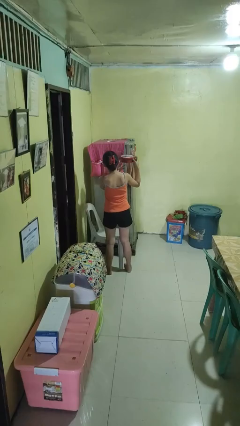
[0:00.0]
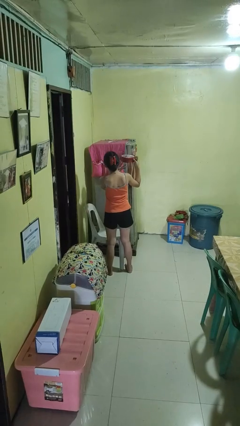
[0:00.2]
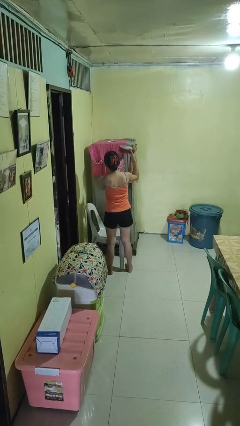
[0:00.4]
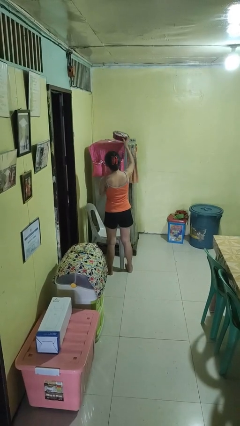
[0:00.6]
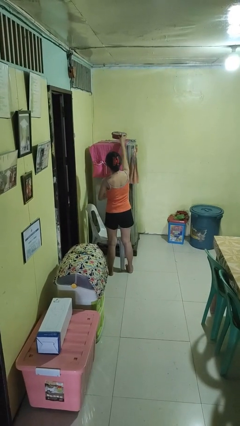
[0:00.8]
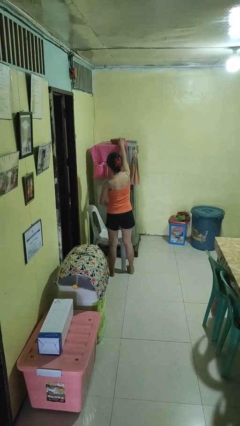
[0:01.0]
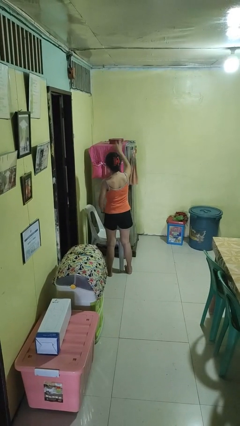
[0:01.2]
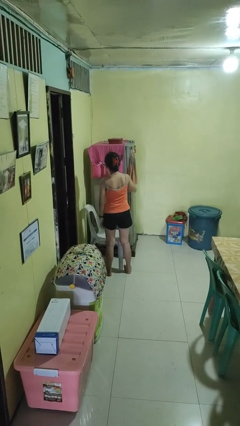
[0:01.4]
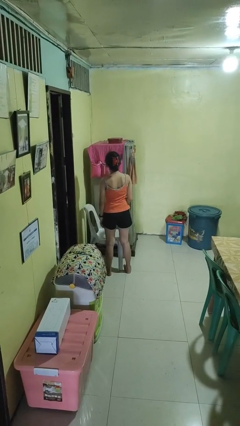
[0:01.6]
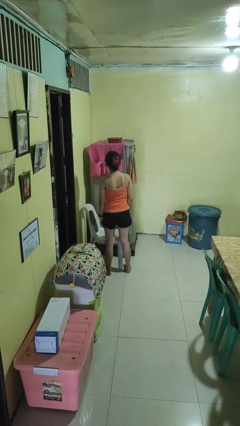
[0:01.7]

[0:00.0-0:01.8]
person puts down object on shelf

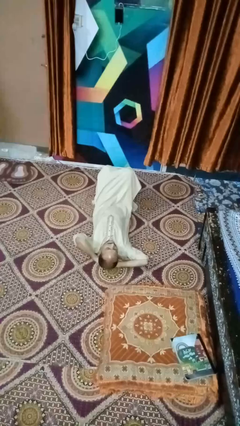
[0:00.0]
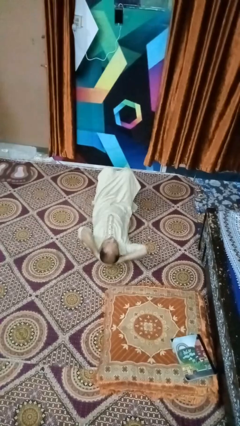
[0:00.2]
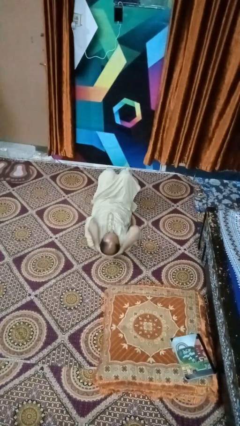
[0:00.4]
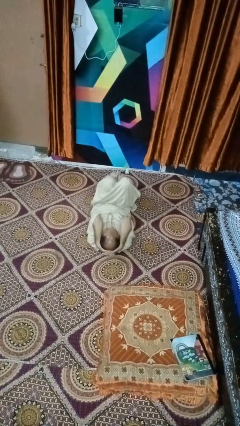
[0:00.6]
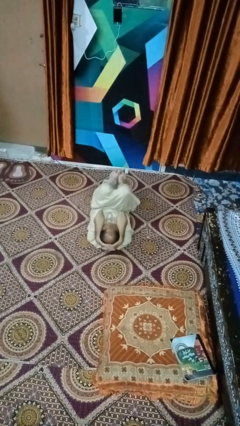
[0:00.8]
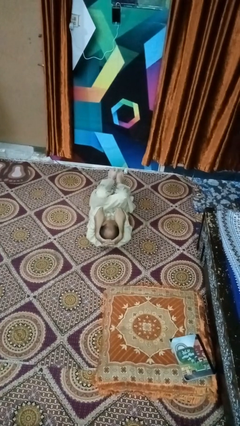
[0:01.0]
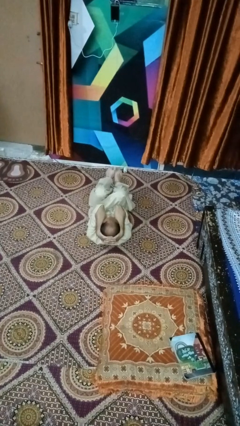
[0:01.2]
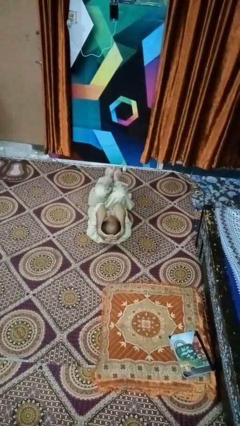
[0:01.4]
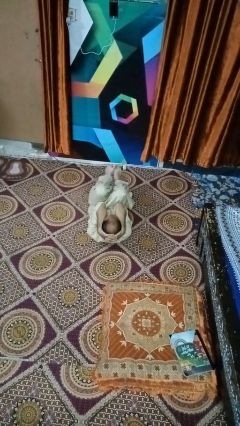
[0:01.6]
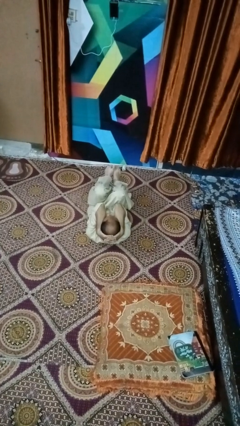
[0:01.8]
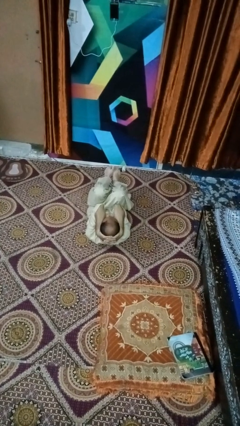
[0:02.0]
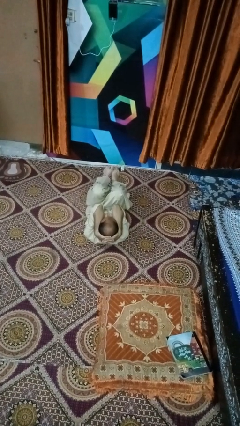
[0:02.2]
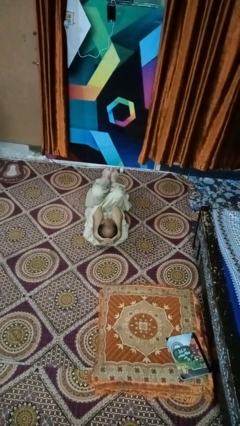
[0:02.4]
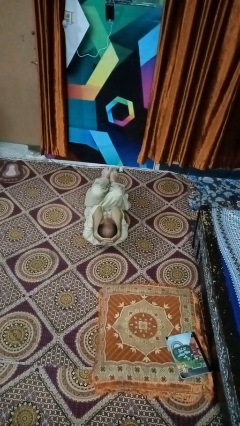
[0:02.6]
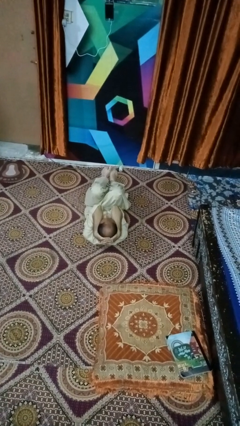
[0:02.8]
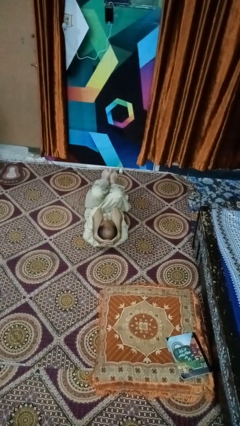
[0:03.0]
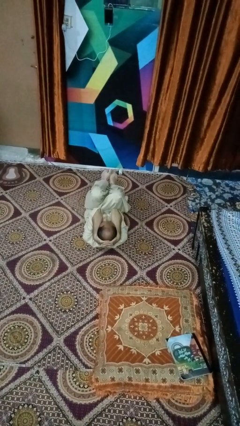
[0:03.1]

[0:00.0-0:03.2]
person exercises with situp

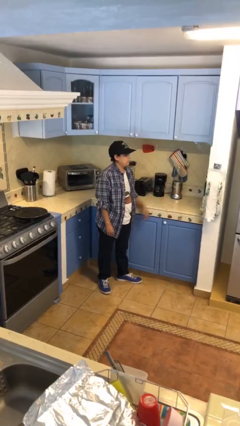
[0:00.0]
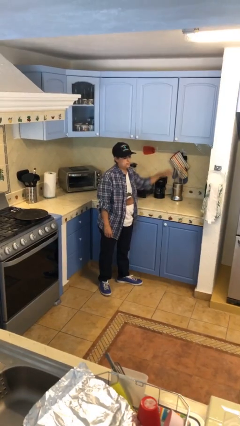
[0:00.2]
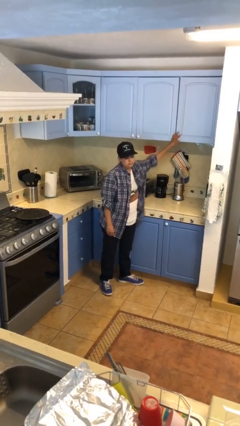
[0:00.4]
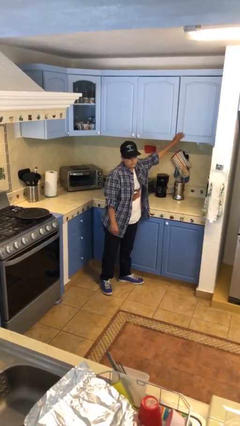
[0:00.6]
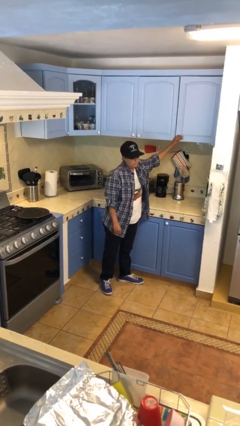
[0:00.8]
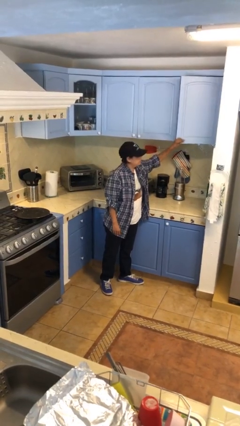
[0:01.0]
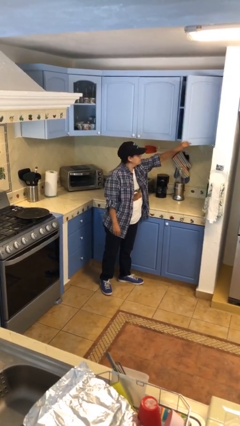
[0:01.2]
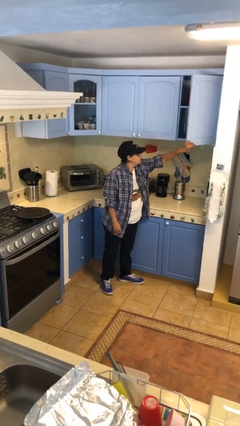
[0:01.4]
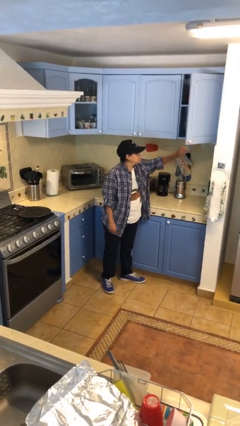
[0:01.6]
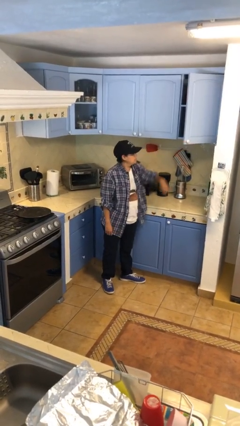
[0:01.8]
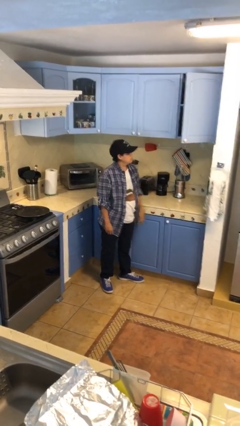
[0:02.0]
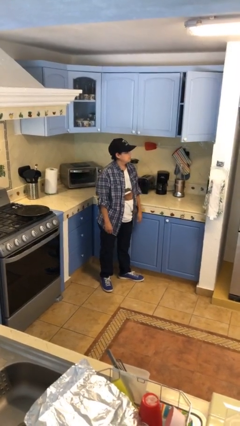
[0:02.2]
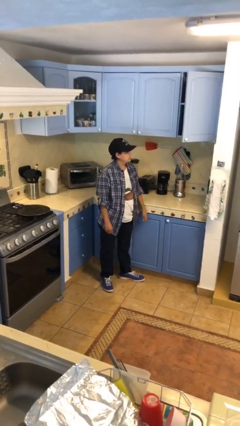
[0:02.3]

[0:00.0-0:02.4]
person opens cabinet

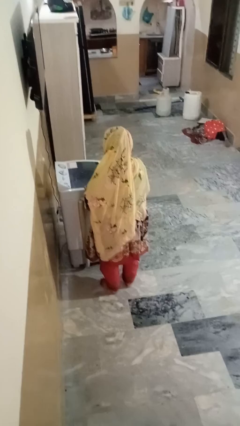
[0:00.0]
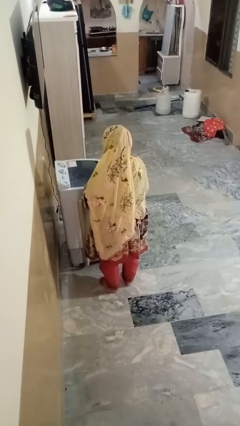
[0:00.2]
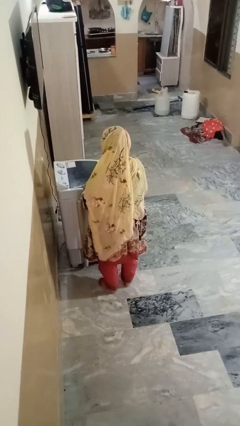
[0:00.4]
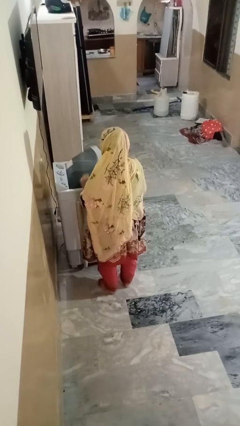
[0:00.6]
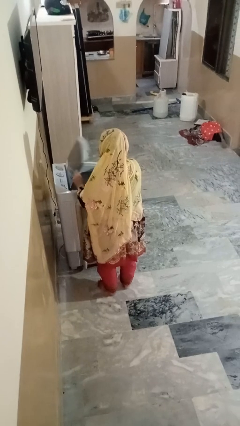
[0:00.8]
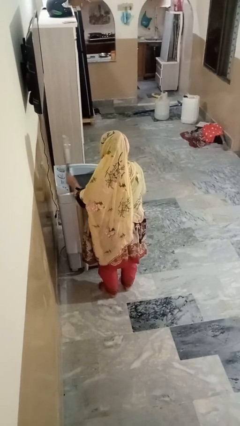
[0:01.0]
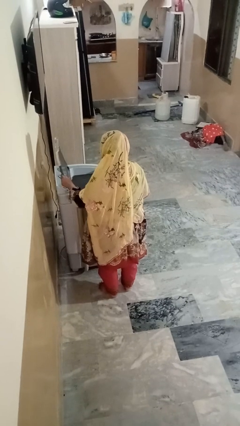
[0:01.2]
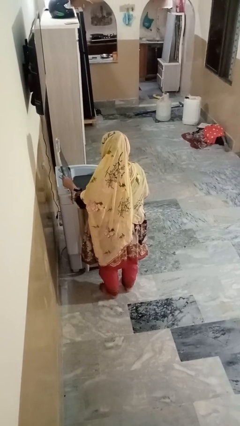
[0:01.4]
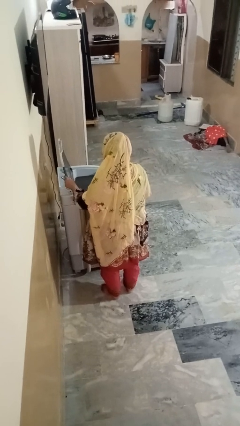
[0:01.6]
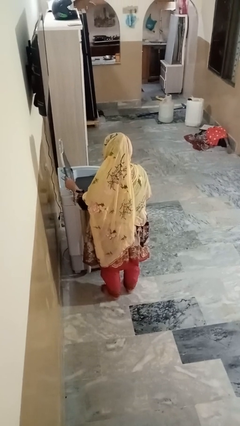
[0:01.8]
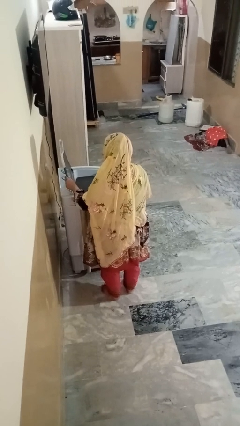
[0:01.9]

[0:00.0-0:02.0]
person opens clothes washer

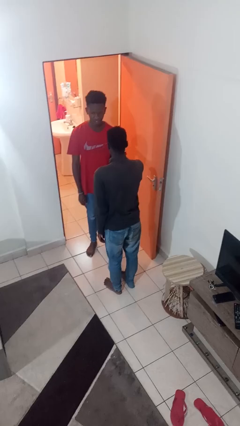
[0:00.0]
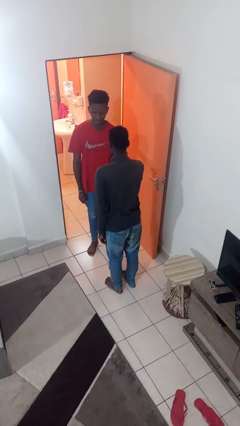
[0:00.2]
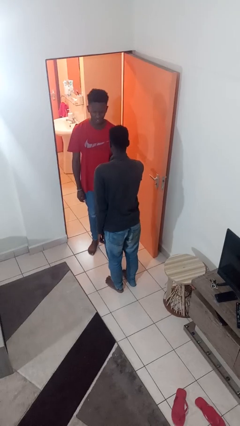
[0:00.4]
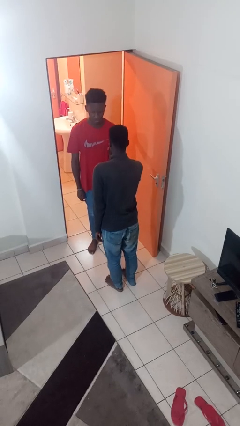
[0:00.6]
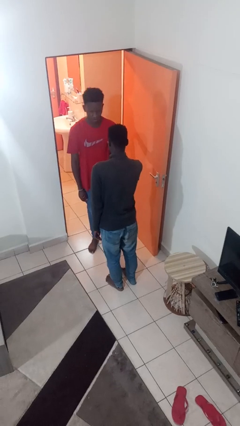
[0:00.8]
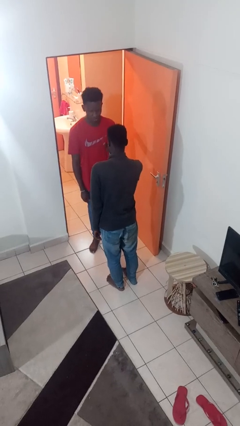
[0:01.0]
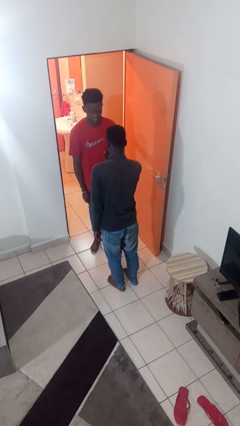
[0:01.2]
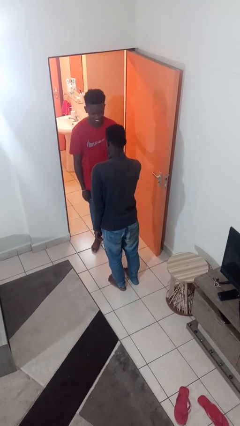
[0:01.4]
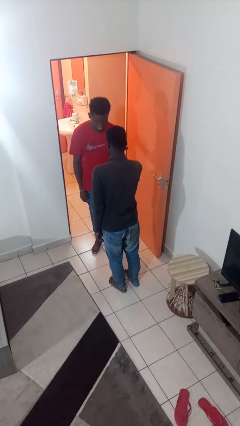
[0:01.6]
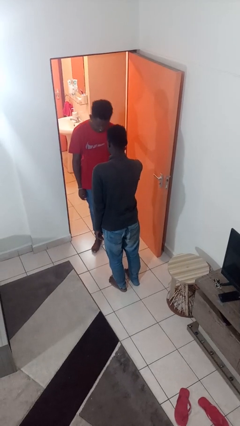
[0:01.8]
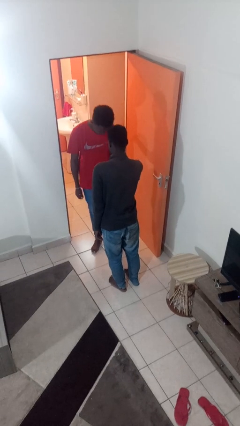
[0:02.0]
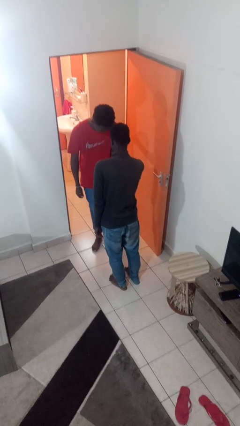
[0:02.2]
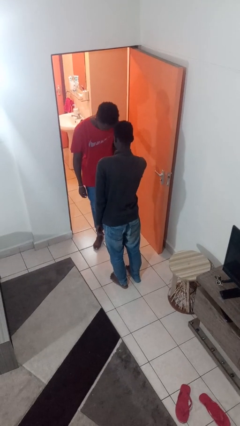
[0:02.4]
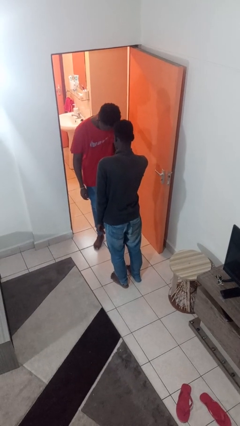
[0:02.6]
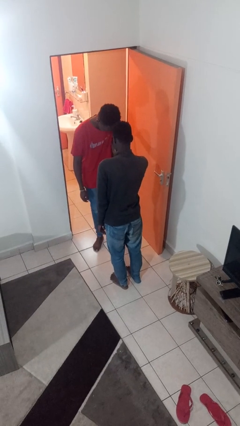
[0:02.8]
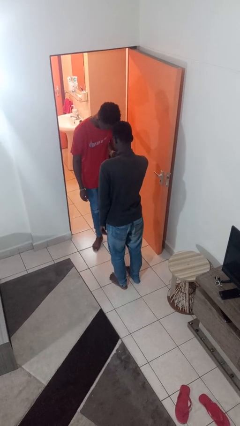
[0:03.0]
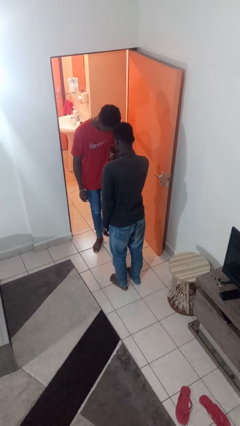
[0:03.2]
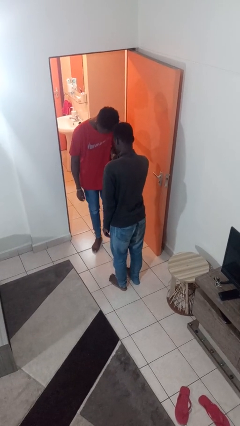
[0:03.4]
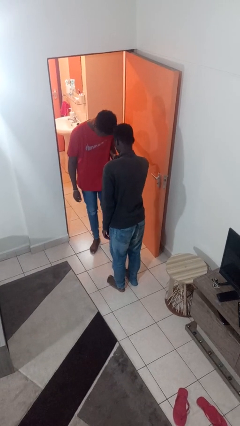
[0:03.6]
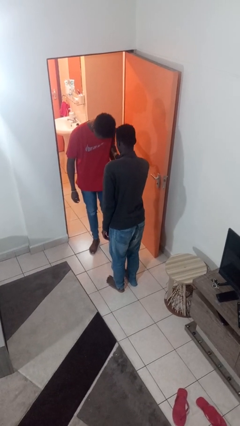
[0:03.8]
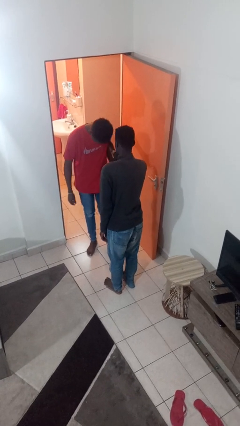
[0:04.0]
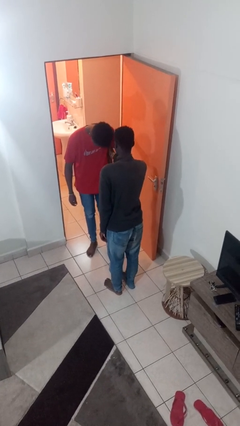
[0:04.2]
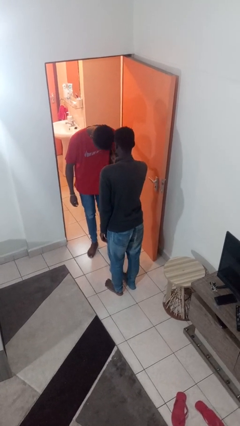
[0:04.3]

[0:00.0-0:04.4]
person tickles person

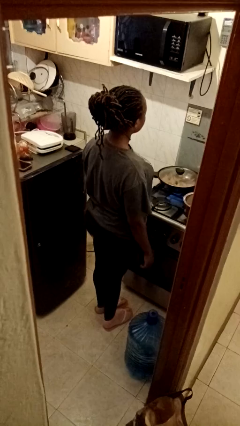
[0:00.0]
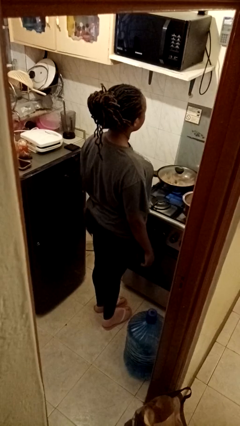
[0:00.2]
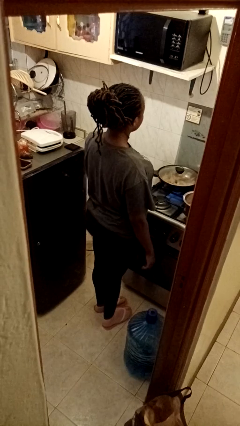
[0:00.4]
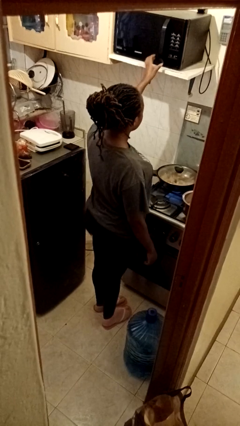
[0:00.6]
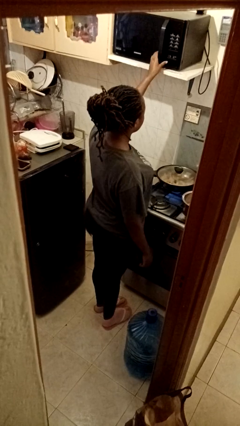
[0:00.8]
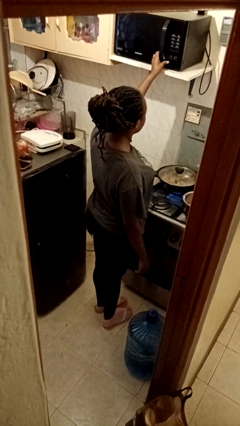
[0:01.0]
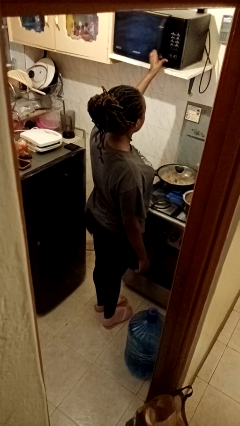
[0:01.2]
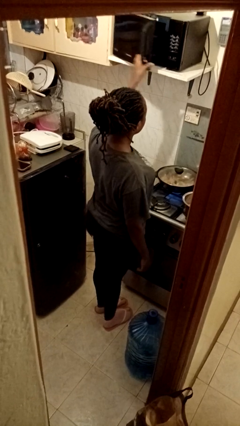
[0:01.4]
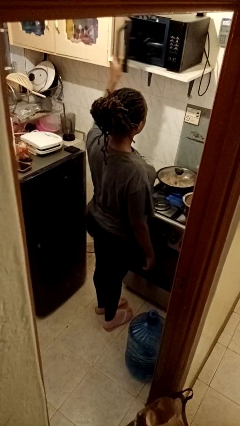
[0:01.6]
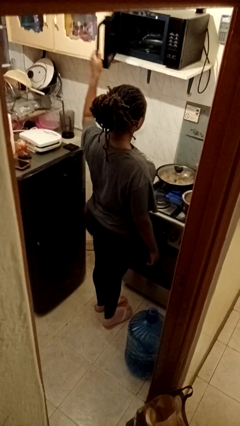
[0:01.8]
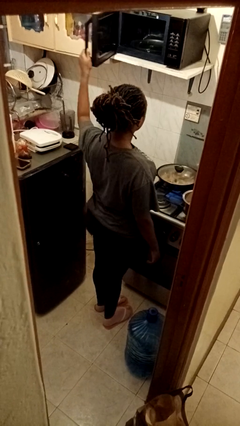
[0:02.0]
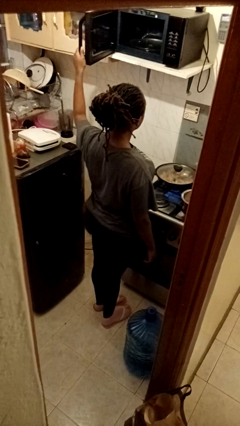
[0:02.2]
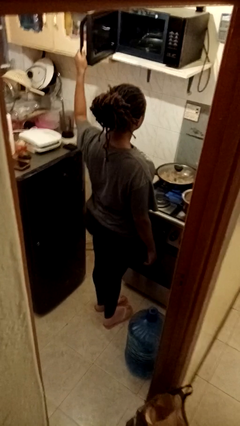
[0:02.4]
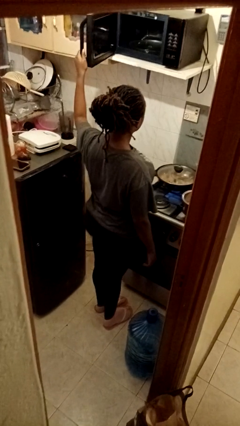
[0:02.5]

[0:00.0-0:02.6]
person opens microwave

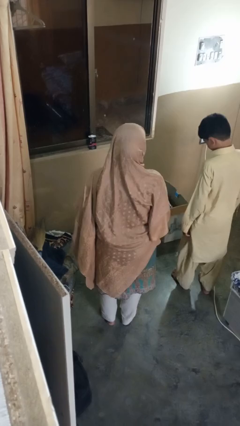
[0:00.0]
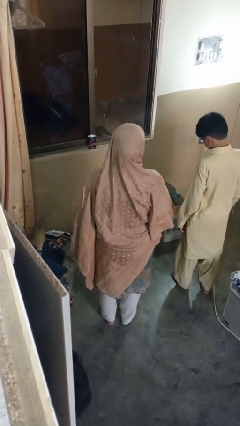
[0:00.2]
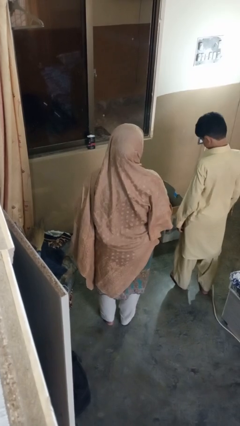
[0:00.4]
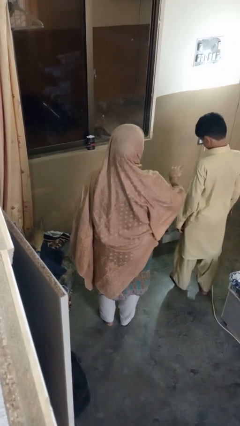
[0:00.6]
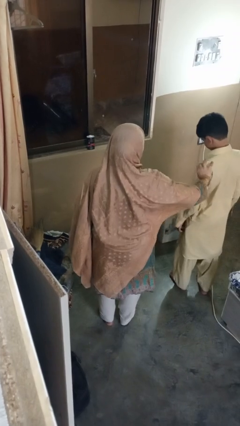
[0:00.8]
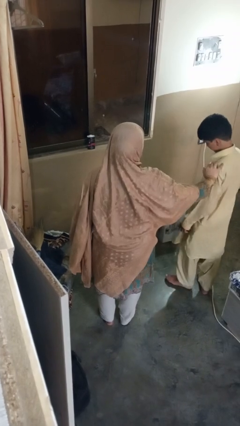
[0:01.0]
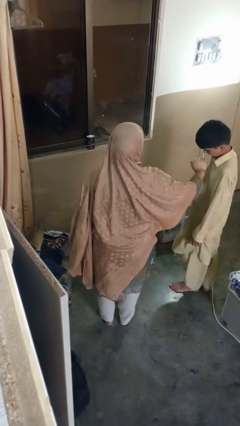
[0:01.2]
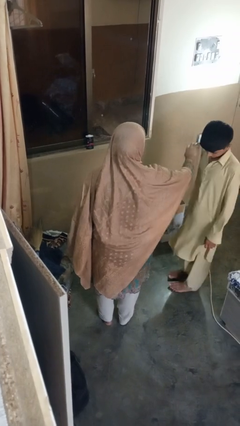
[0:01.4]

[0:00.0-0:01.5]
person grabs person by shoulder
